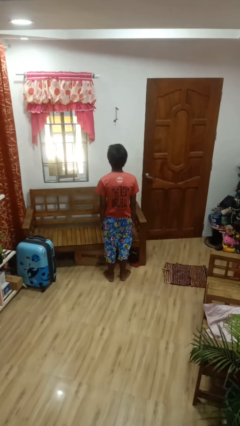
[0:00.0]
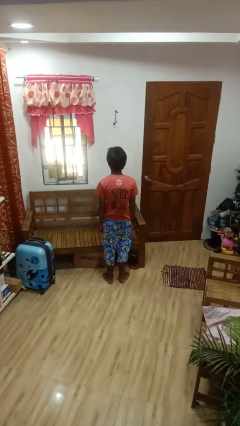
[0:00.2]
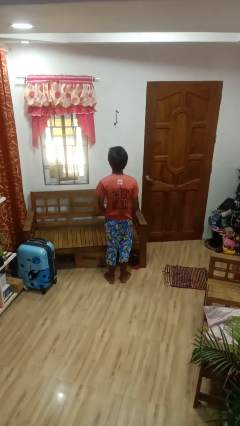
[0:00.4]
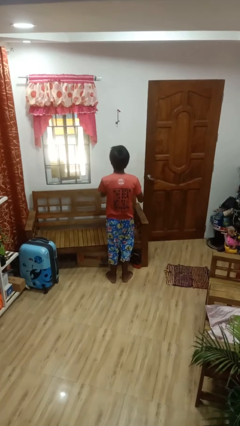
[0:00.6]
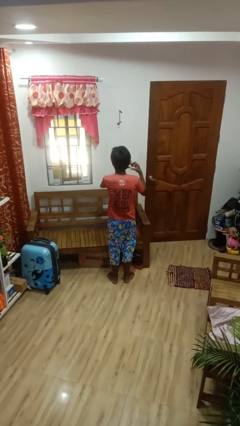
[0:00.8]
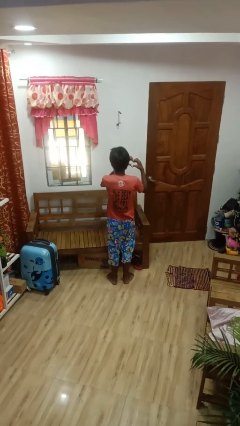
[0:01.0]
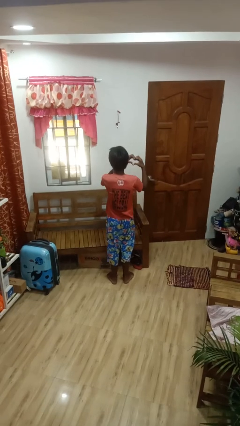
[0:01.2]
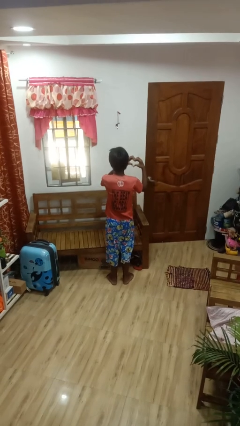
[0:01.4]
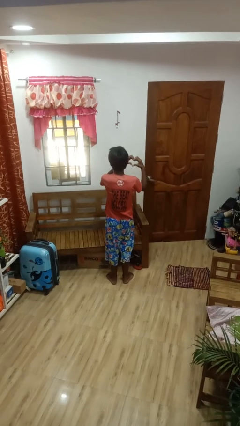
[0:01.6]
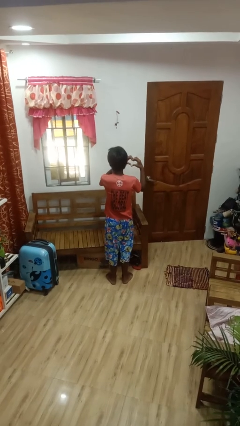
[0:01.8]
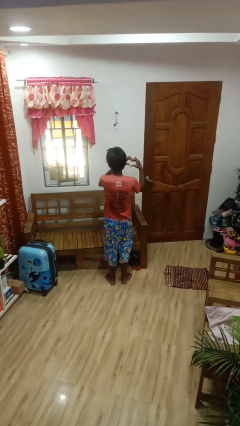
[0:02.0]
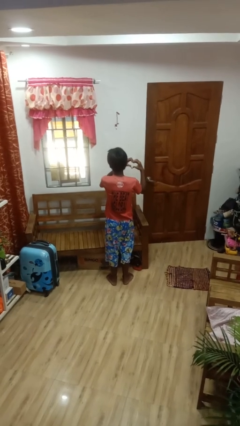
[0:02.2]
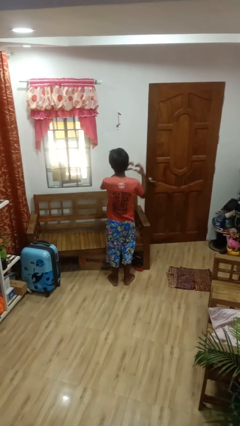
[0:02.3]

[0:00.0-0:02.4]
person gestures heart

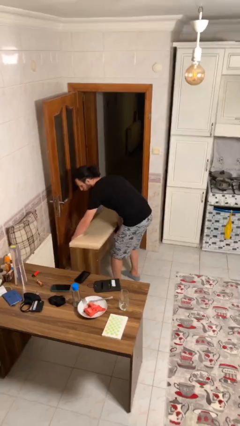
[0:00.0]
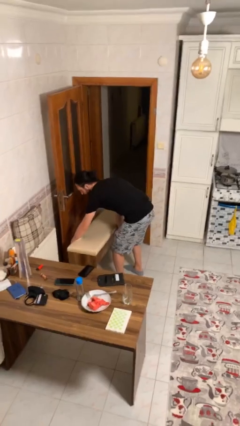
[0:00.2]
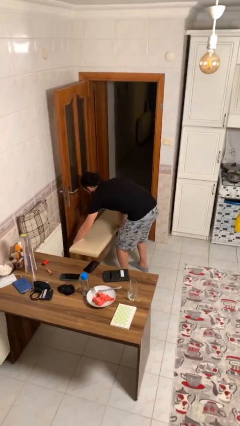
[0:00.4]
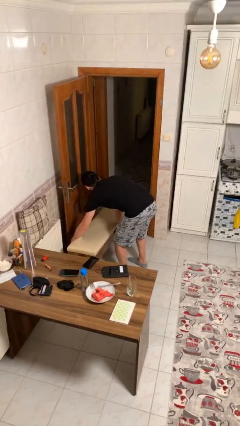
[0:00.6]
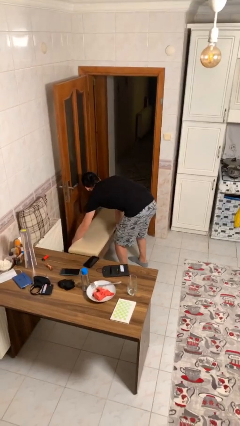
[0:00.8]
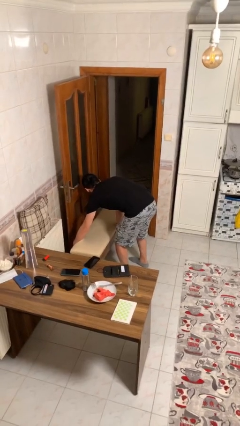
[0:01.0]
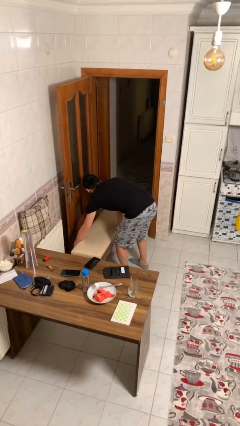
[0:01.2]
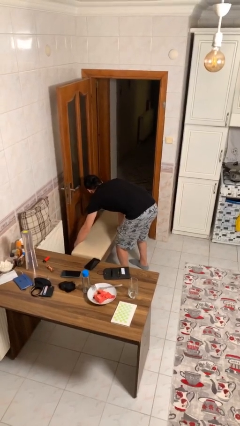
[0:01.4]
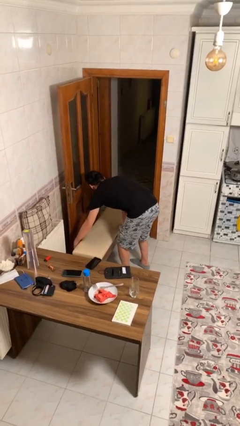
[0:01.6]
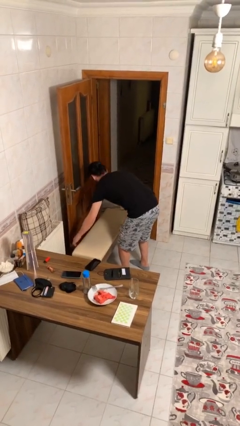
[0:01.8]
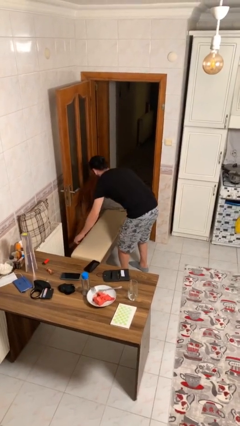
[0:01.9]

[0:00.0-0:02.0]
person puts down object on floor

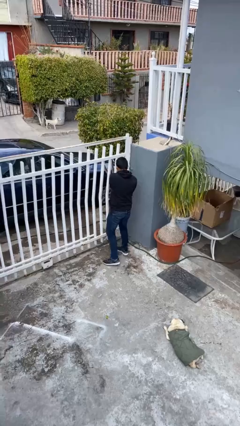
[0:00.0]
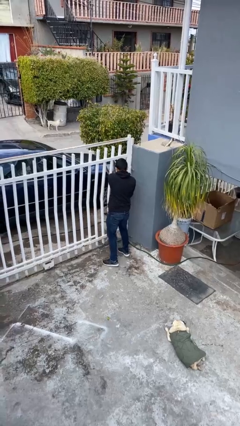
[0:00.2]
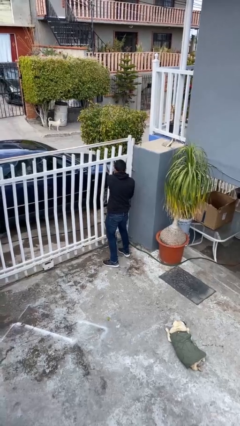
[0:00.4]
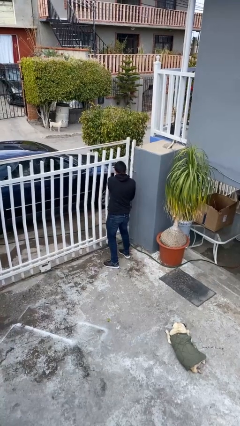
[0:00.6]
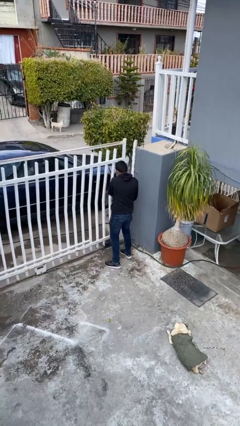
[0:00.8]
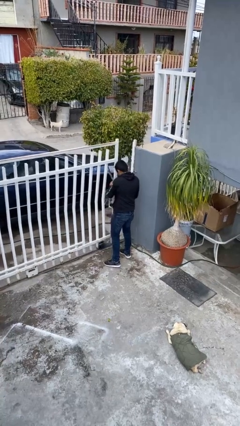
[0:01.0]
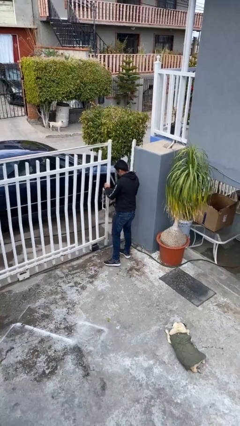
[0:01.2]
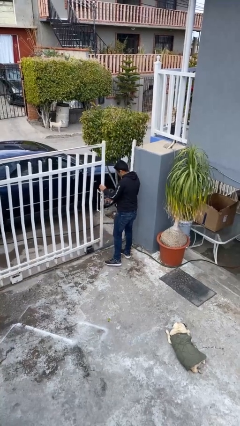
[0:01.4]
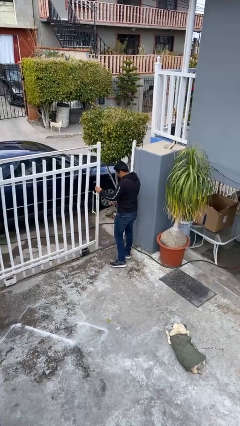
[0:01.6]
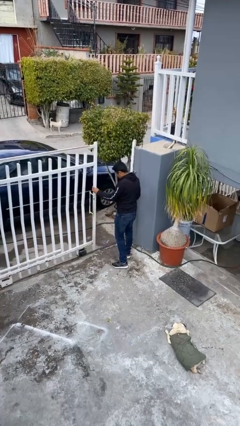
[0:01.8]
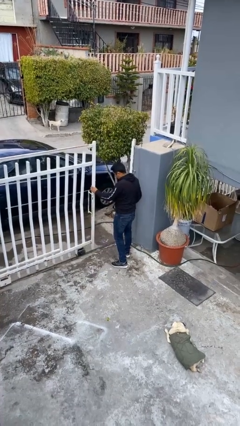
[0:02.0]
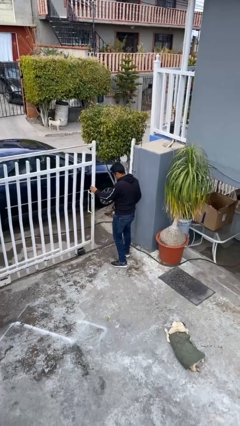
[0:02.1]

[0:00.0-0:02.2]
person opens facility door

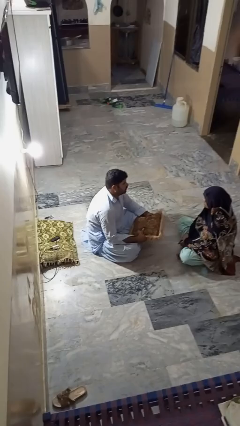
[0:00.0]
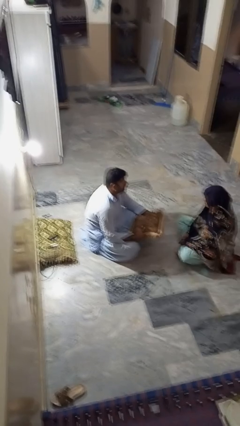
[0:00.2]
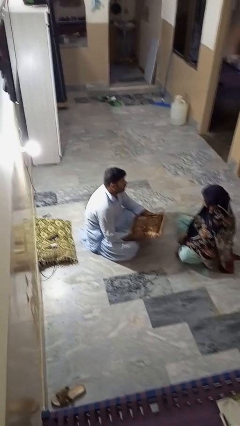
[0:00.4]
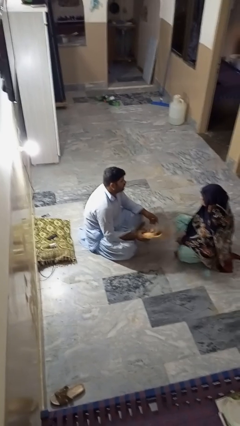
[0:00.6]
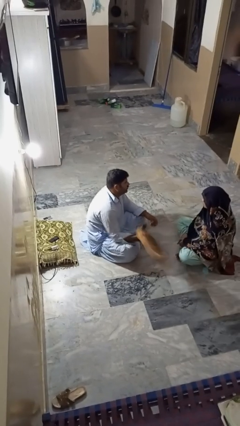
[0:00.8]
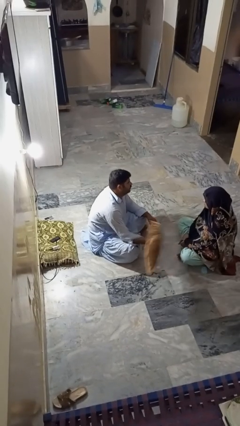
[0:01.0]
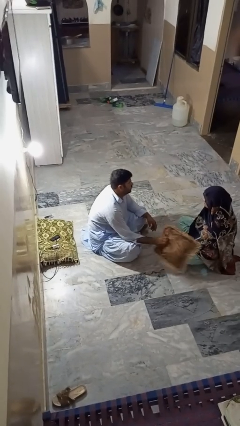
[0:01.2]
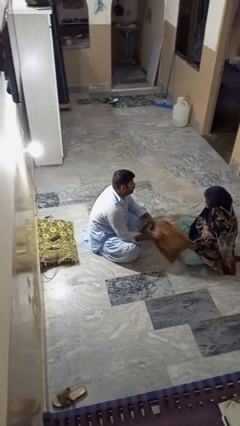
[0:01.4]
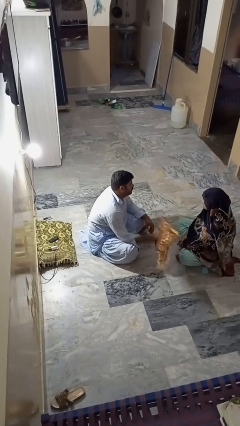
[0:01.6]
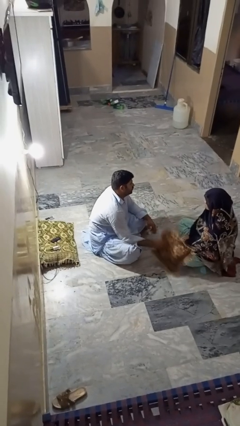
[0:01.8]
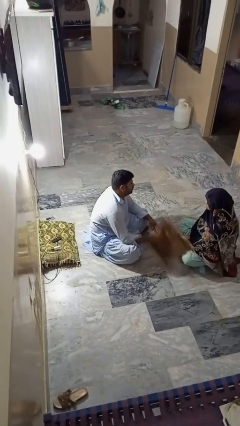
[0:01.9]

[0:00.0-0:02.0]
person hits person with pillow

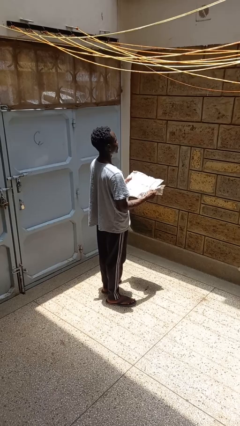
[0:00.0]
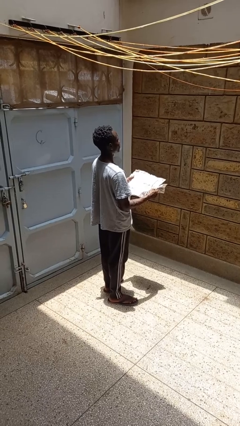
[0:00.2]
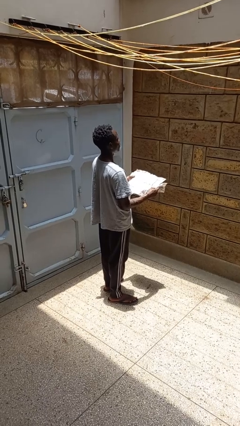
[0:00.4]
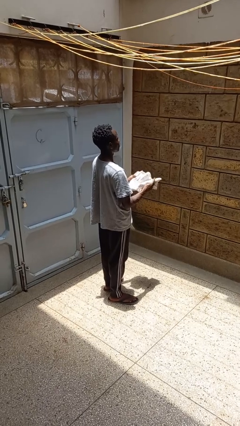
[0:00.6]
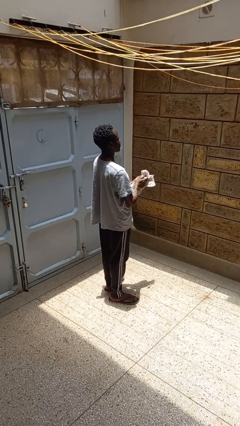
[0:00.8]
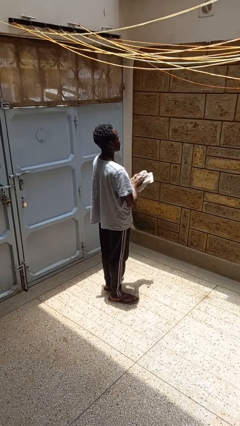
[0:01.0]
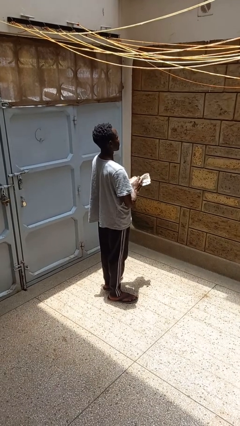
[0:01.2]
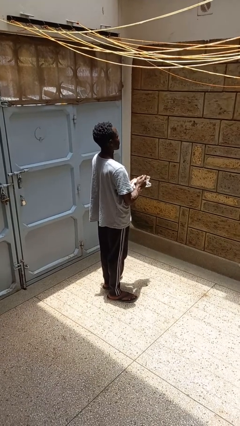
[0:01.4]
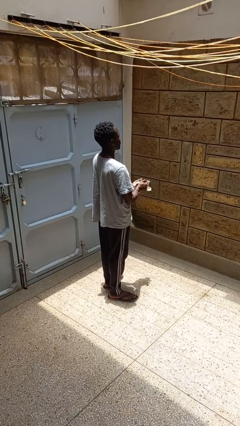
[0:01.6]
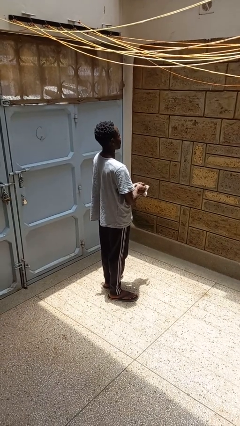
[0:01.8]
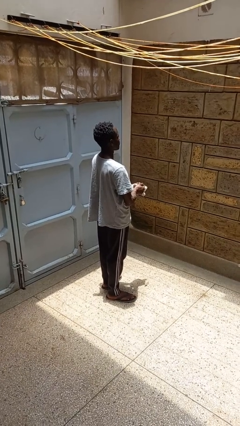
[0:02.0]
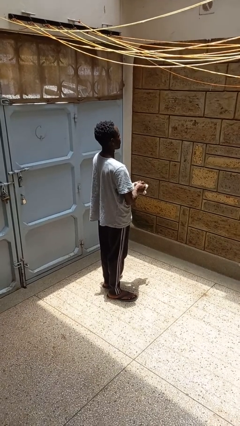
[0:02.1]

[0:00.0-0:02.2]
person crumples paper

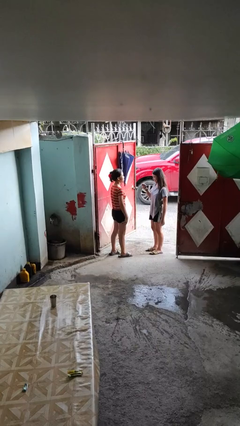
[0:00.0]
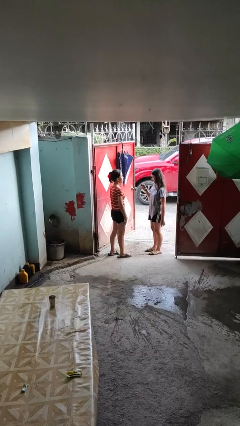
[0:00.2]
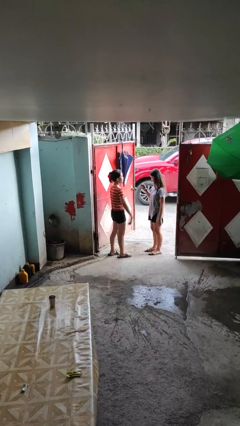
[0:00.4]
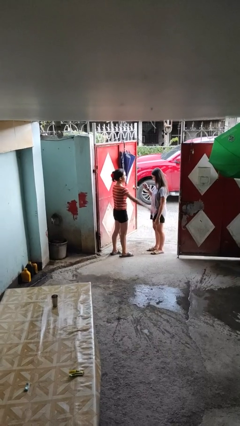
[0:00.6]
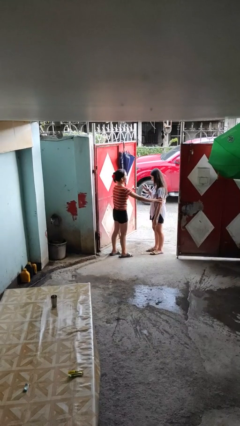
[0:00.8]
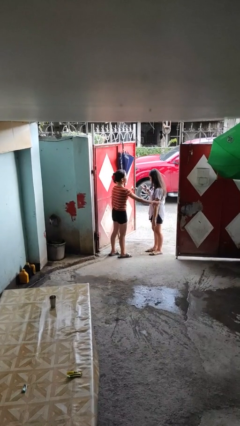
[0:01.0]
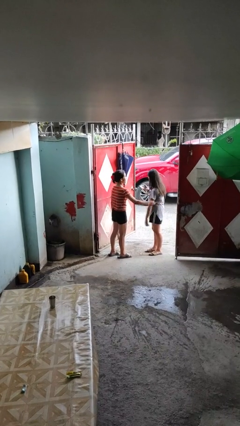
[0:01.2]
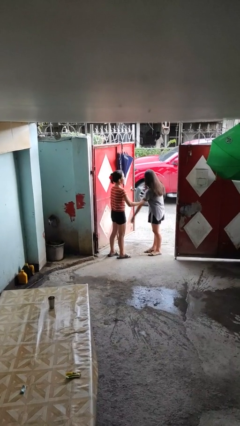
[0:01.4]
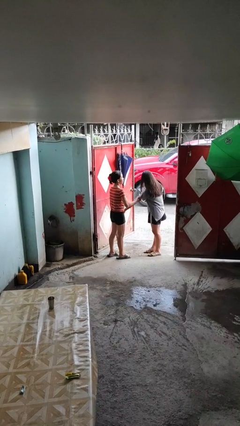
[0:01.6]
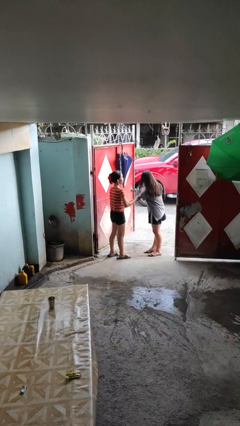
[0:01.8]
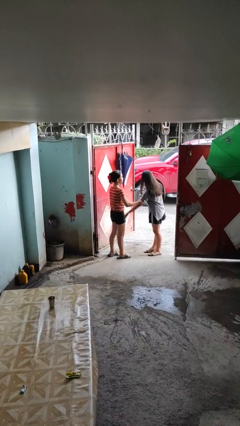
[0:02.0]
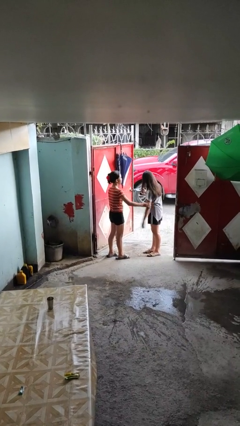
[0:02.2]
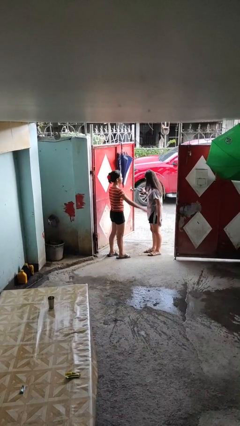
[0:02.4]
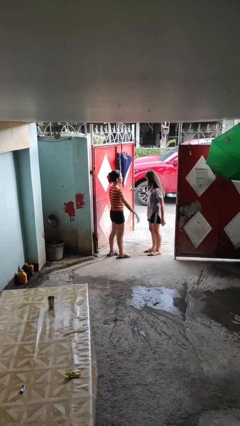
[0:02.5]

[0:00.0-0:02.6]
person grabs person by bicep

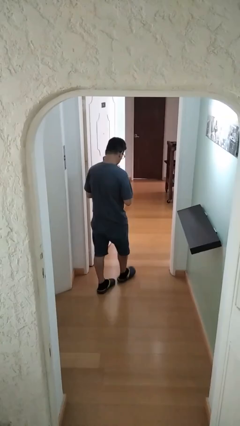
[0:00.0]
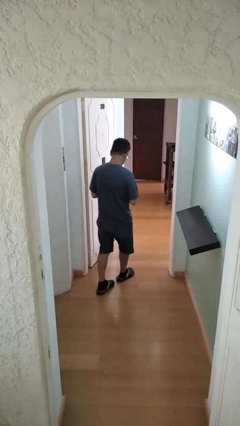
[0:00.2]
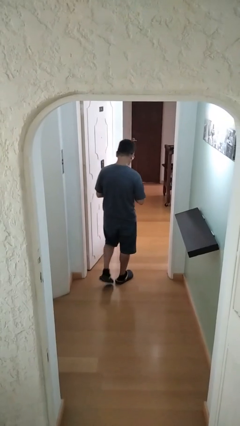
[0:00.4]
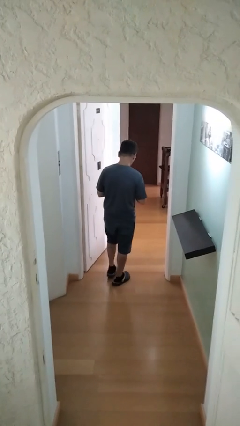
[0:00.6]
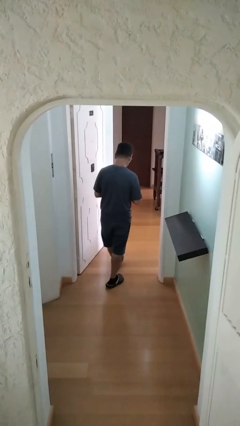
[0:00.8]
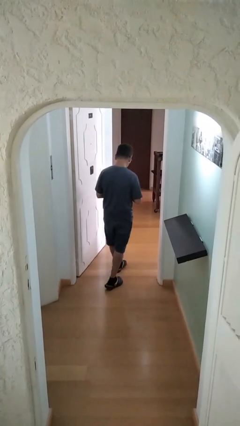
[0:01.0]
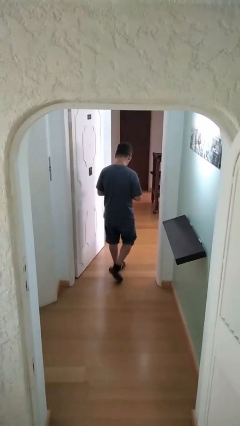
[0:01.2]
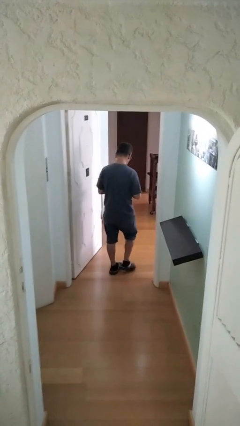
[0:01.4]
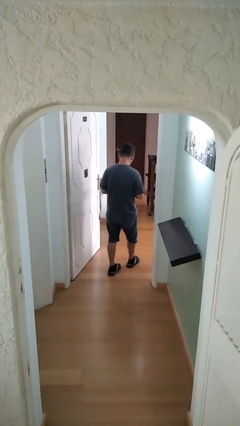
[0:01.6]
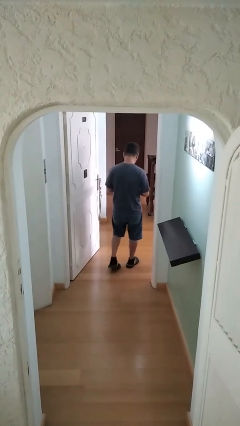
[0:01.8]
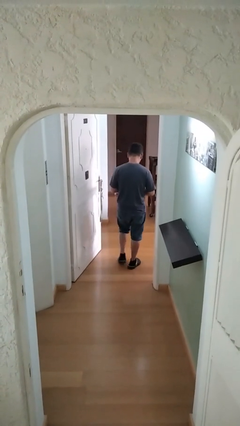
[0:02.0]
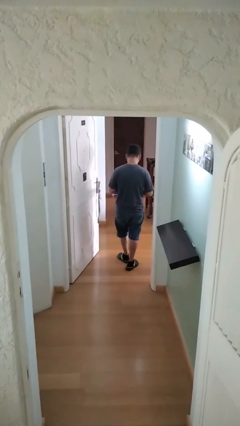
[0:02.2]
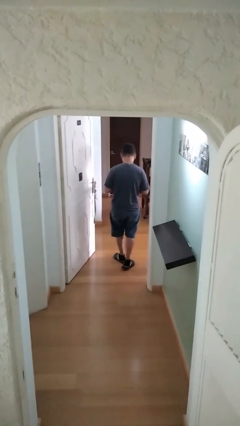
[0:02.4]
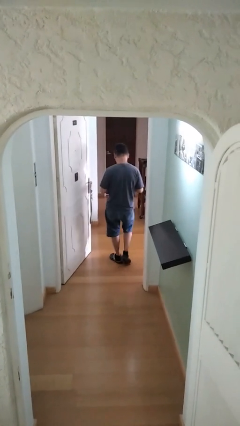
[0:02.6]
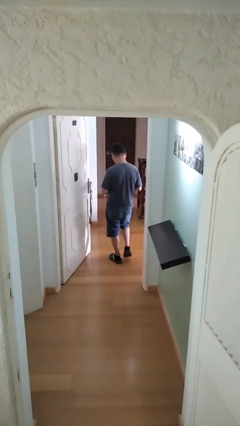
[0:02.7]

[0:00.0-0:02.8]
person exits scene through structure

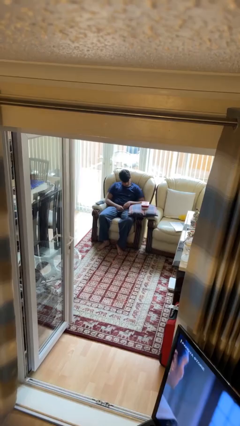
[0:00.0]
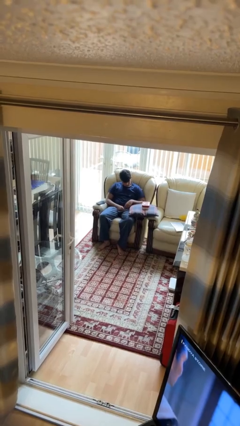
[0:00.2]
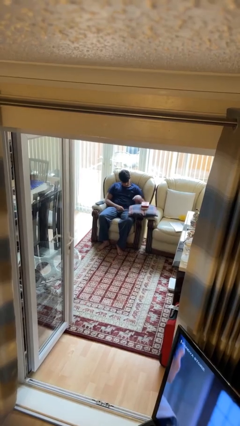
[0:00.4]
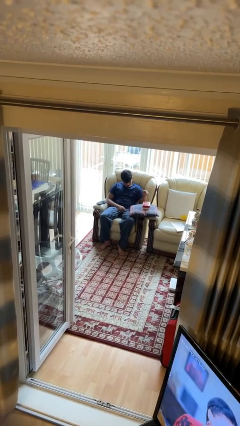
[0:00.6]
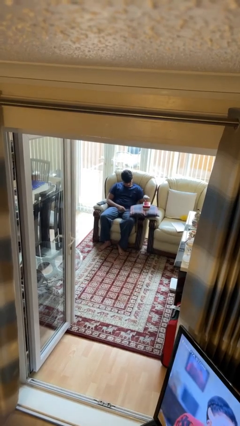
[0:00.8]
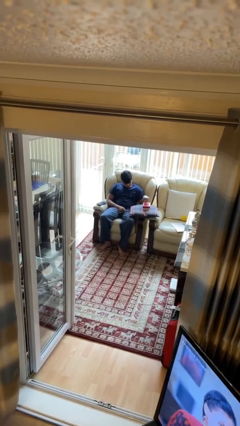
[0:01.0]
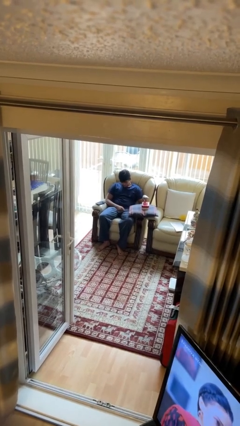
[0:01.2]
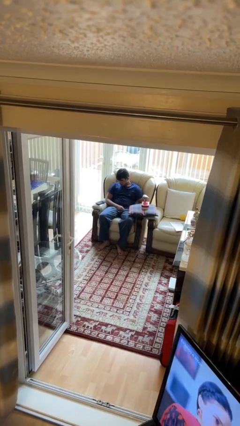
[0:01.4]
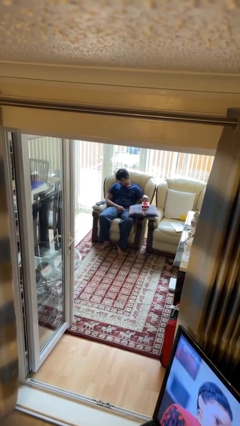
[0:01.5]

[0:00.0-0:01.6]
person taps object with finger
